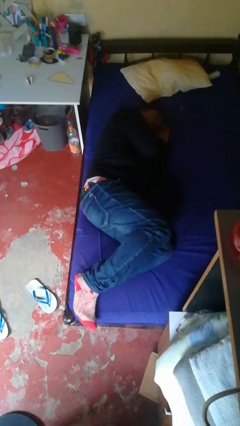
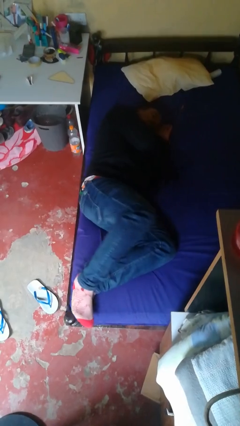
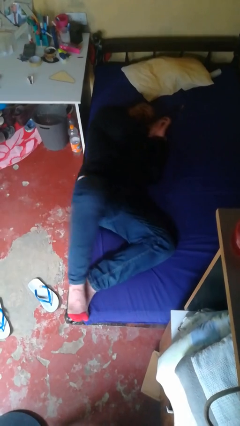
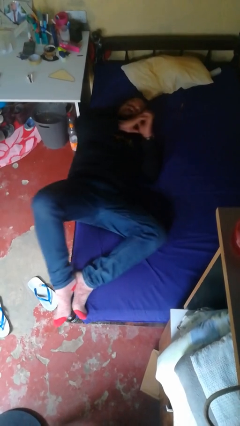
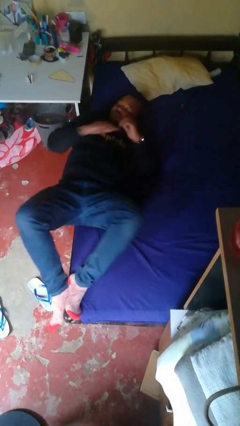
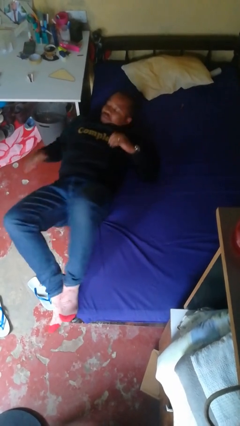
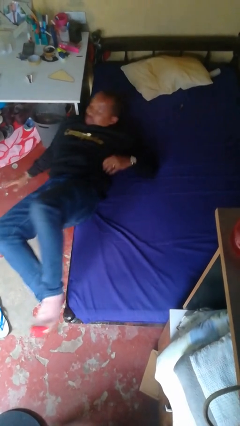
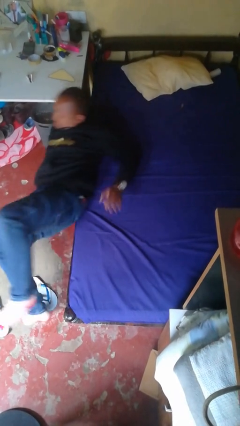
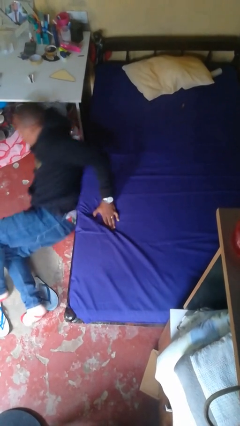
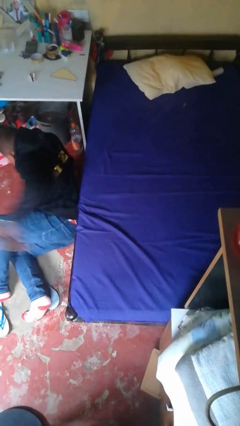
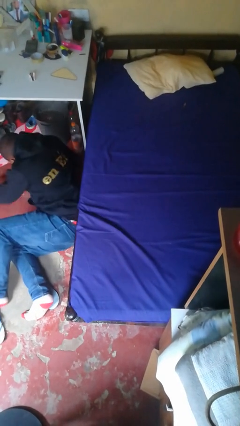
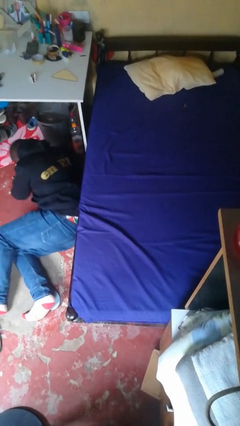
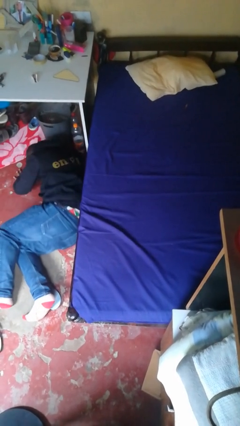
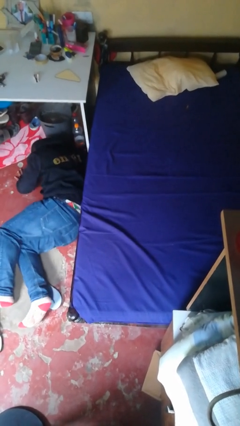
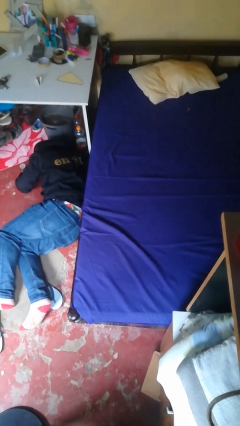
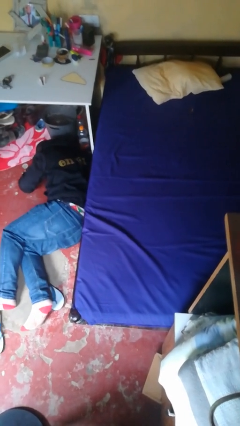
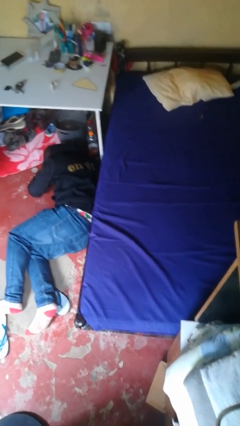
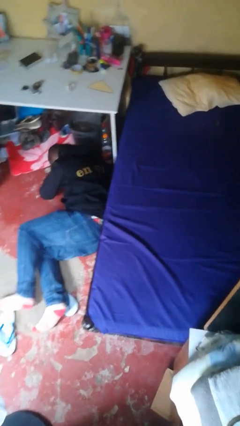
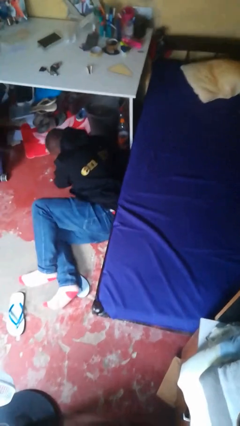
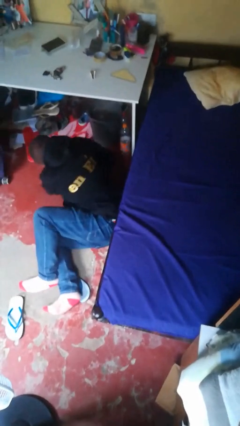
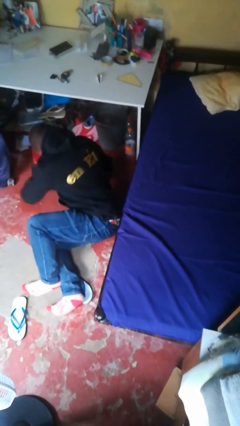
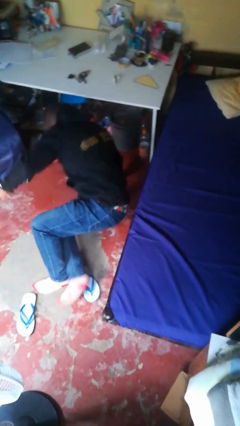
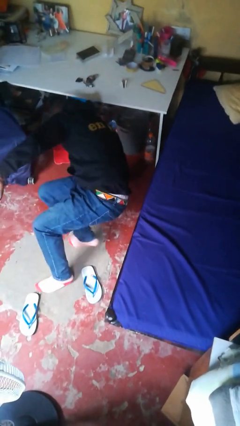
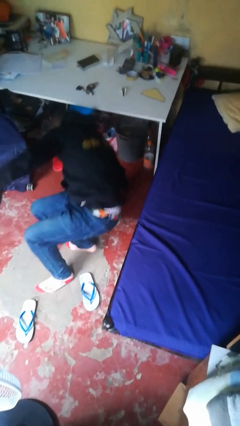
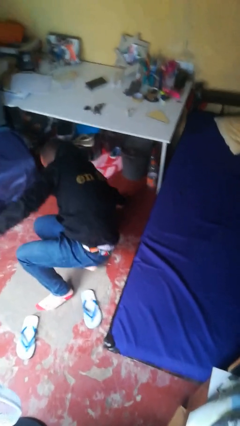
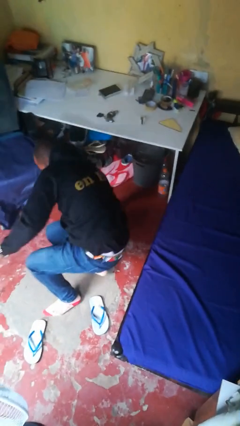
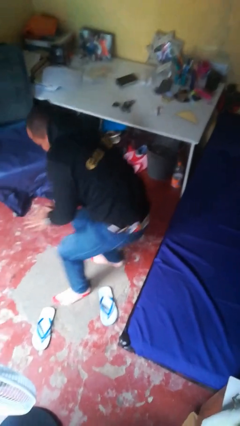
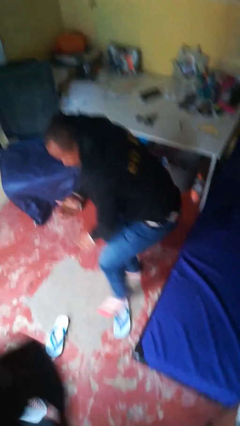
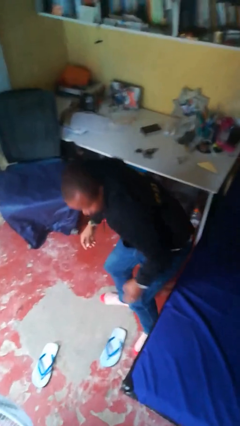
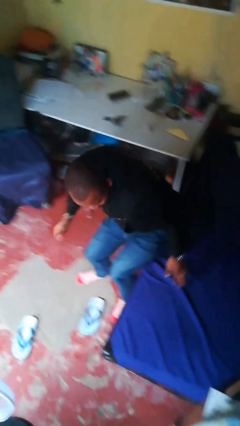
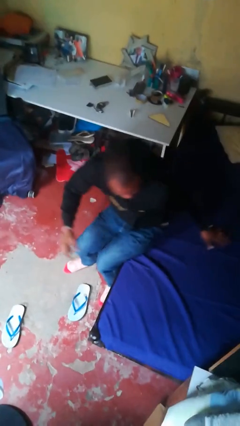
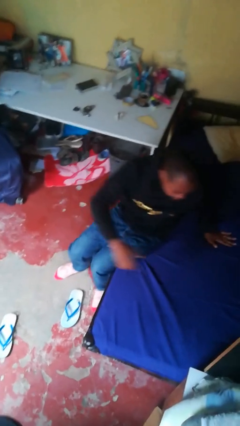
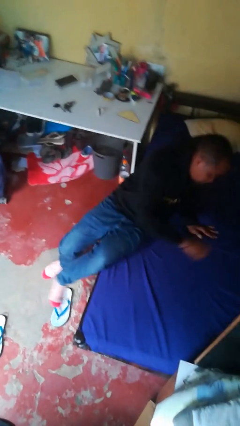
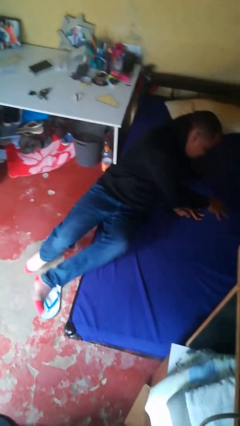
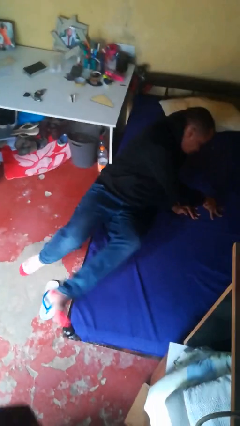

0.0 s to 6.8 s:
person stands up from floor

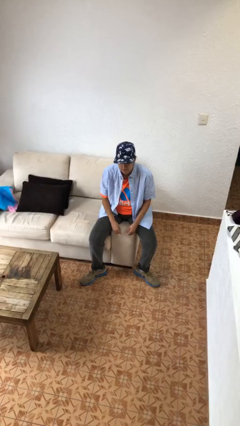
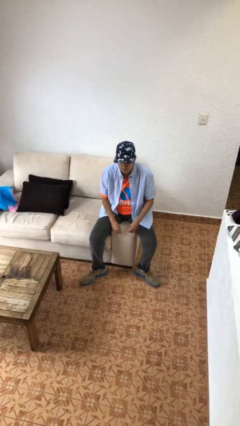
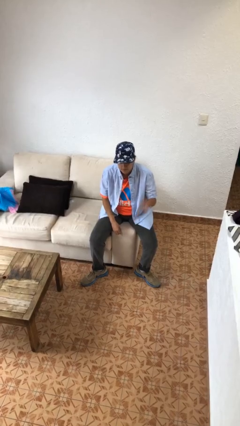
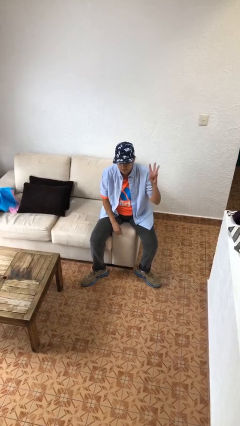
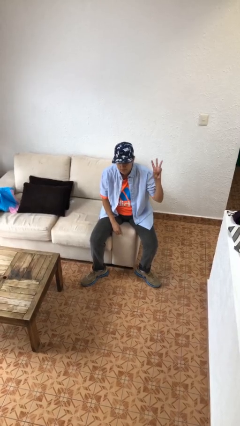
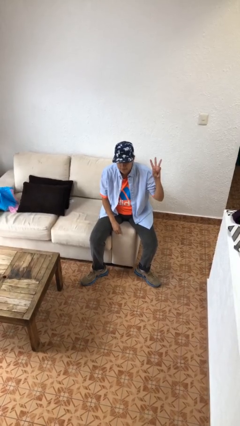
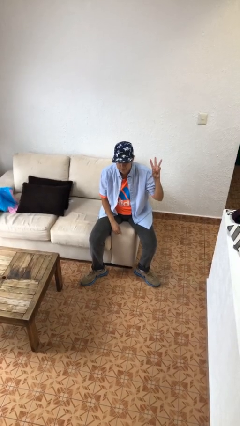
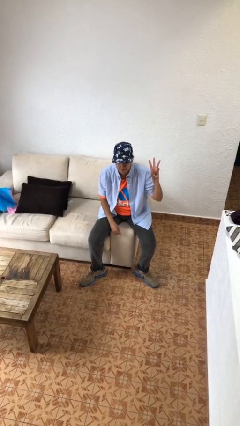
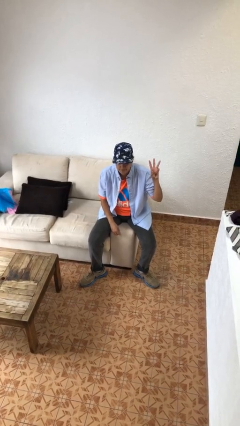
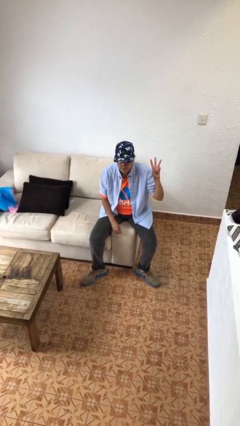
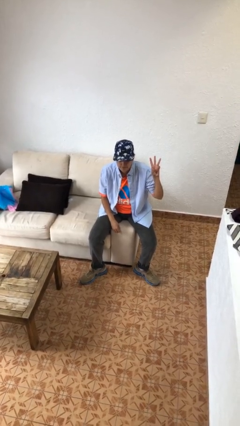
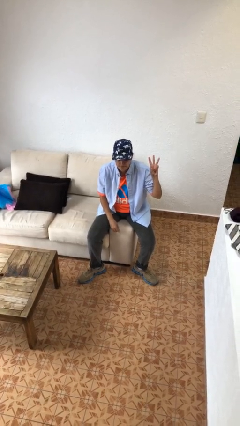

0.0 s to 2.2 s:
person gestures number three

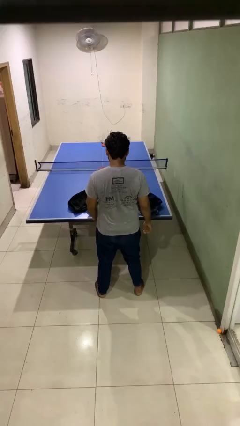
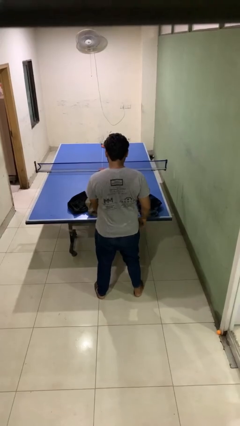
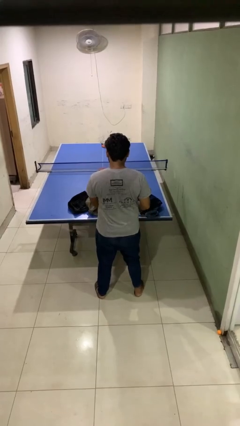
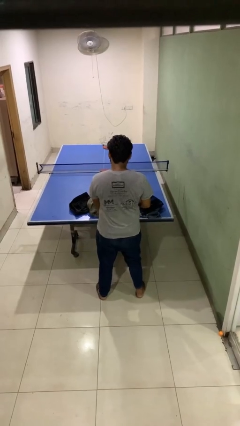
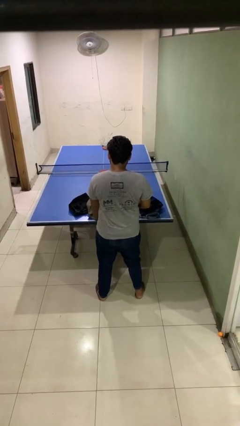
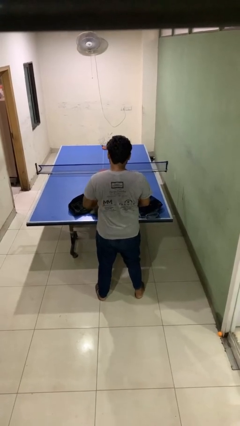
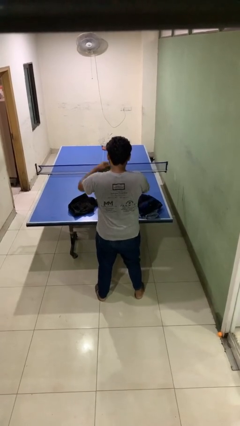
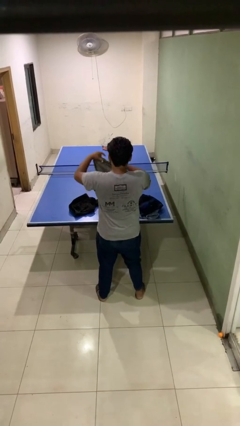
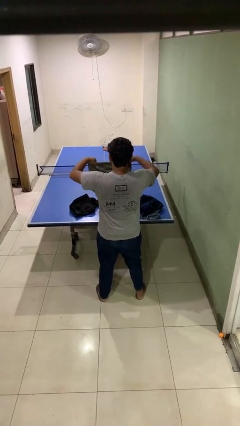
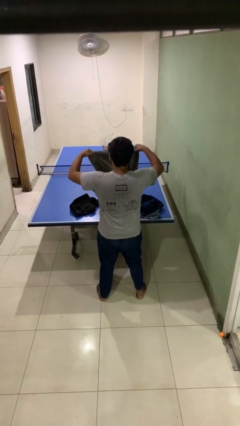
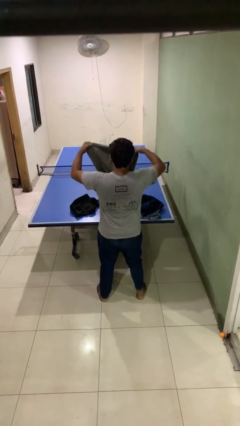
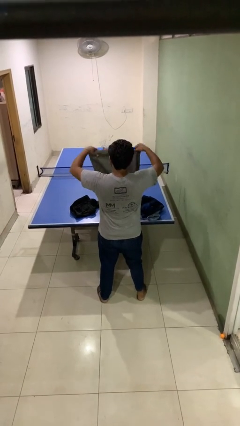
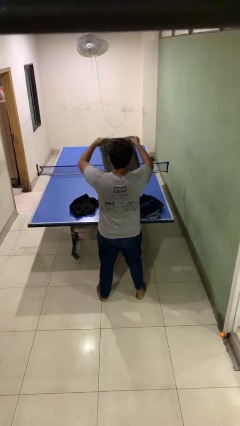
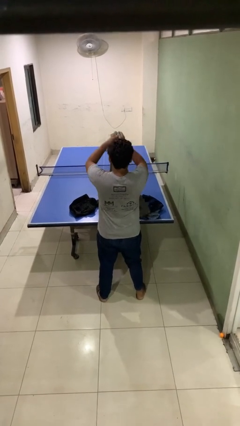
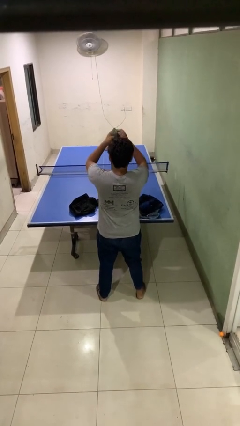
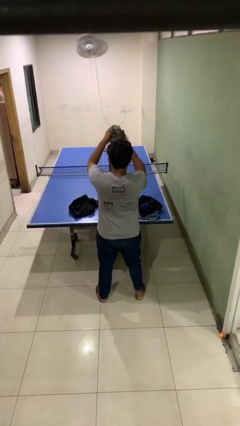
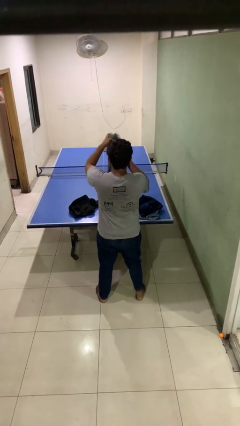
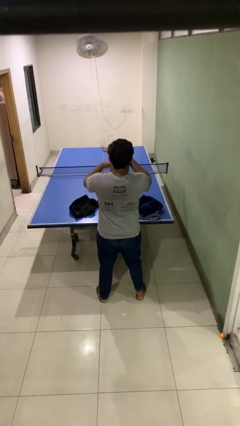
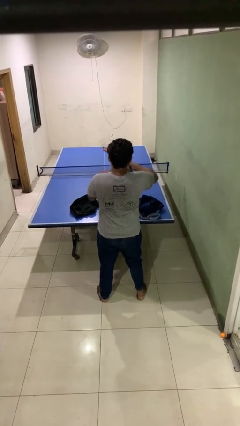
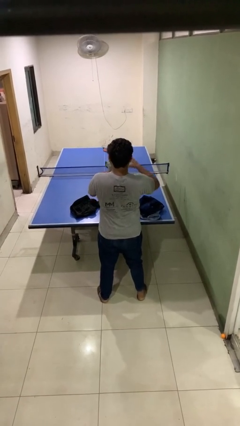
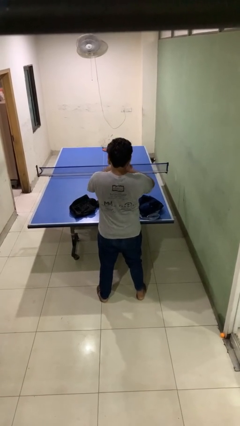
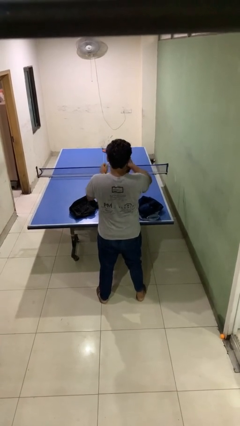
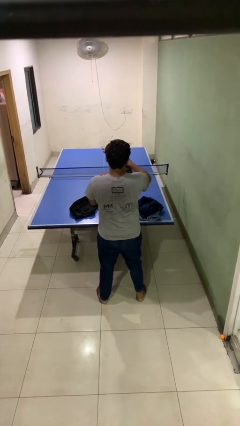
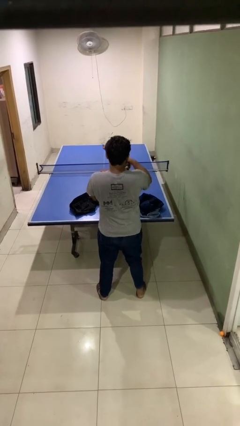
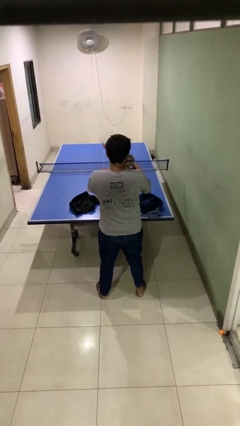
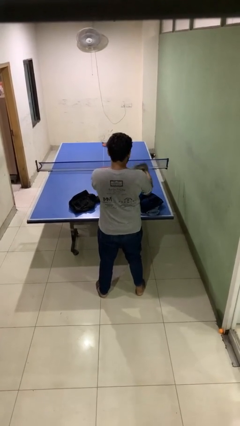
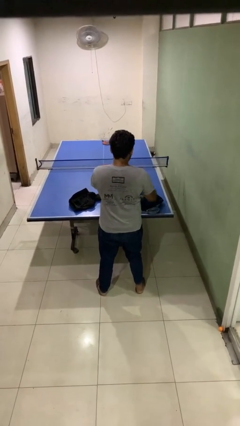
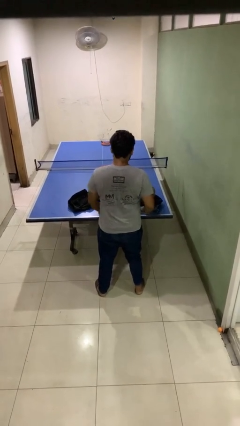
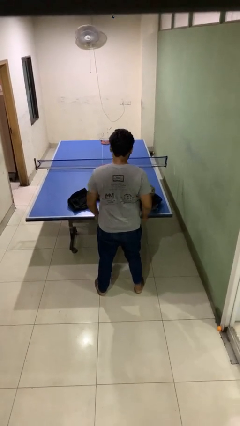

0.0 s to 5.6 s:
person folds pants

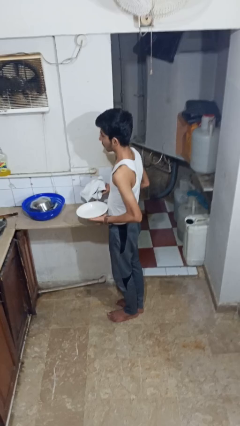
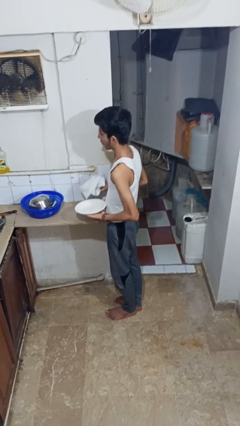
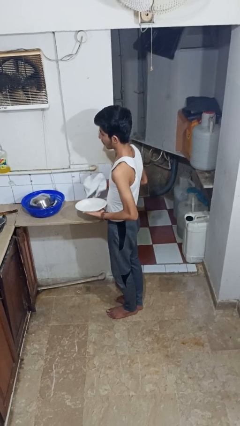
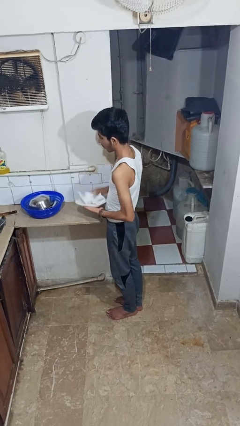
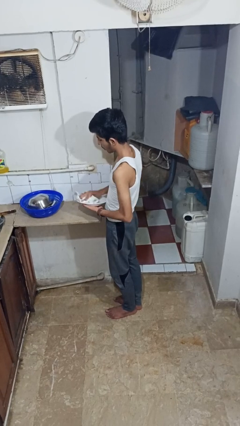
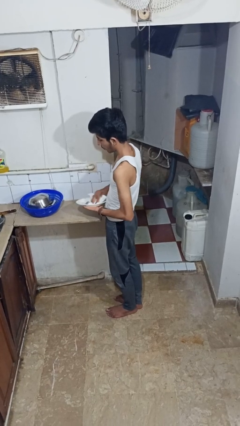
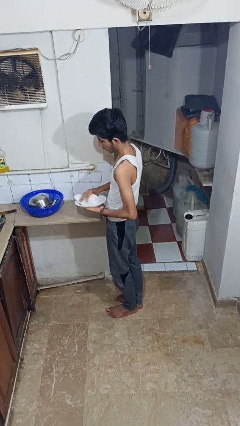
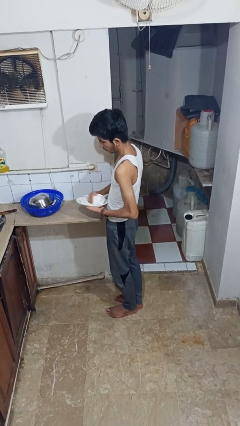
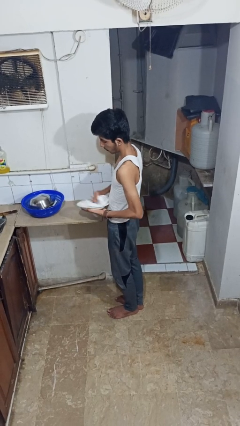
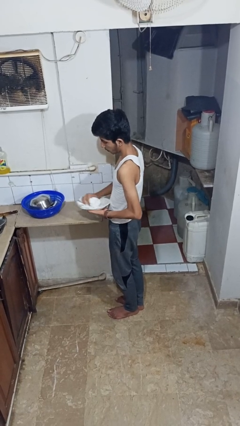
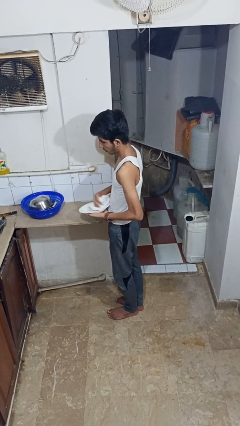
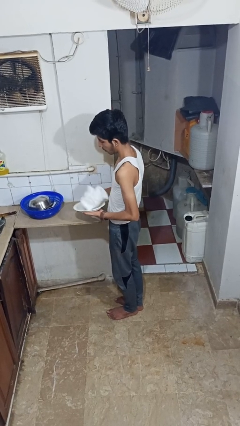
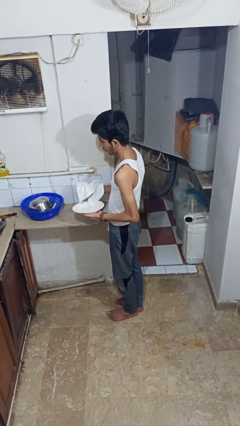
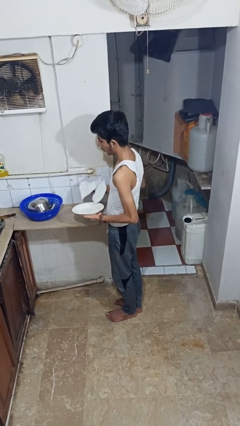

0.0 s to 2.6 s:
person dries dish

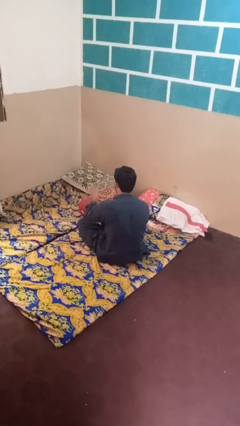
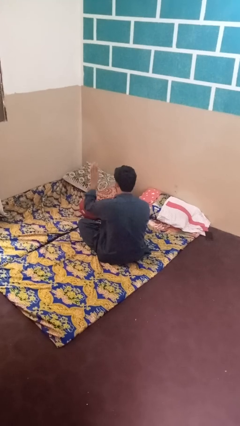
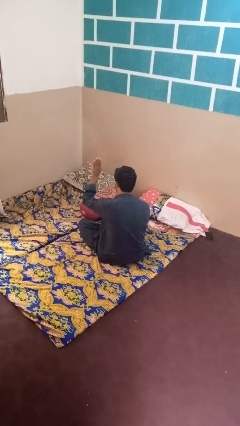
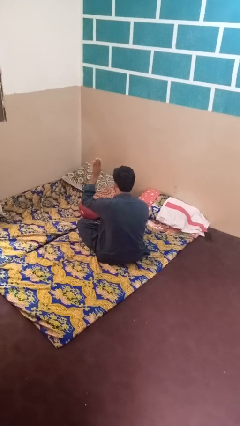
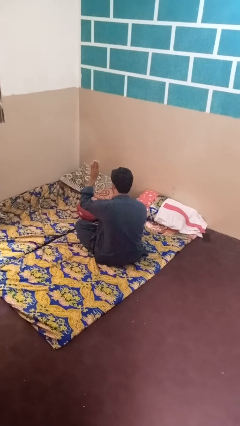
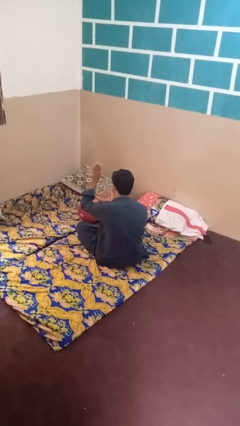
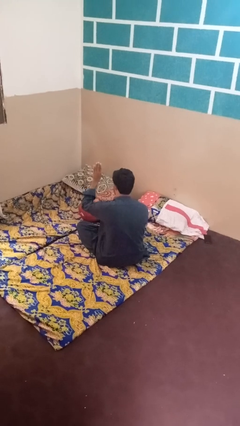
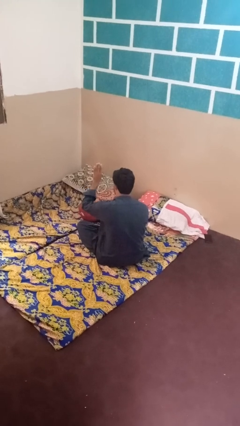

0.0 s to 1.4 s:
person gestures number four
